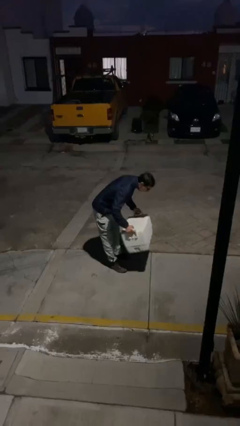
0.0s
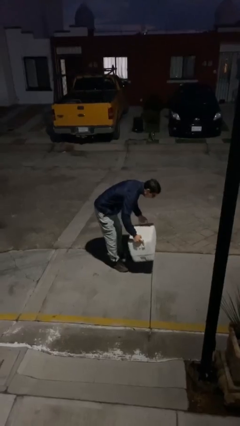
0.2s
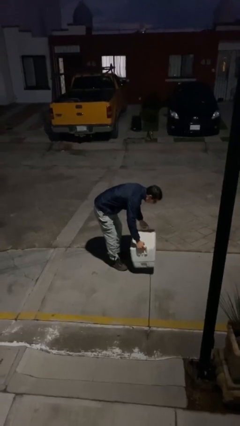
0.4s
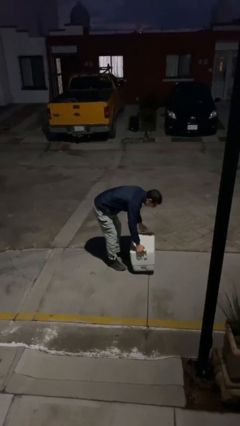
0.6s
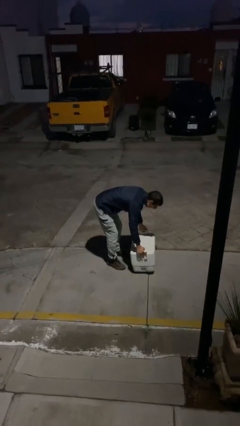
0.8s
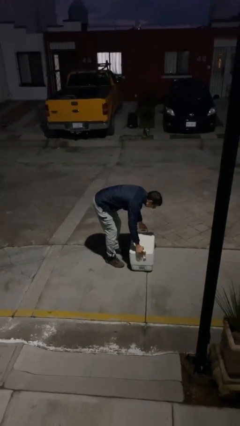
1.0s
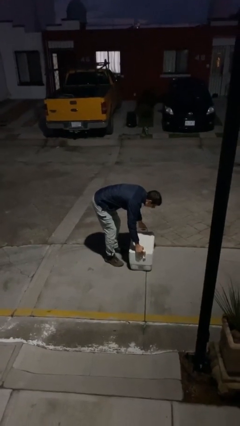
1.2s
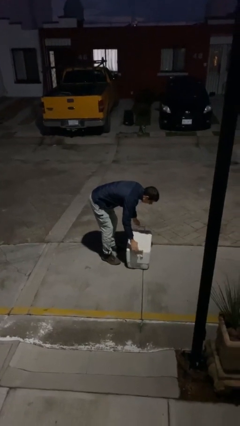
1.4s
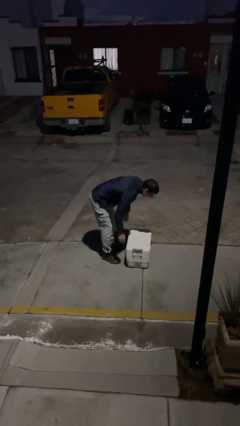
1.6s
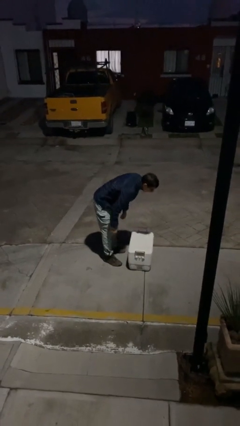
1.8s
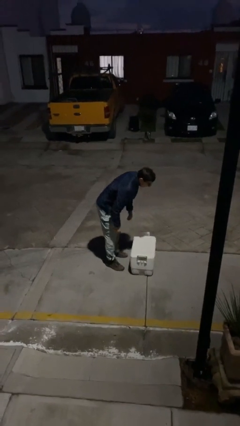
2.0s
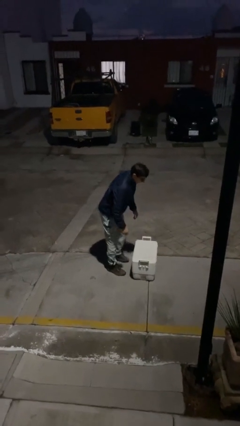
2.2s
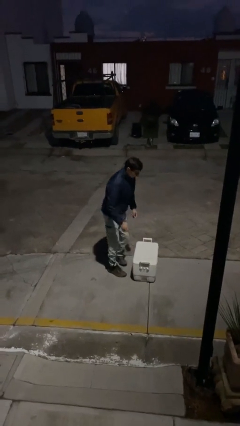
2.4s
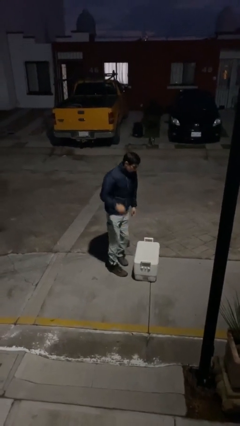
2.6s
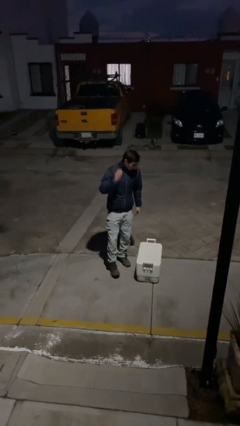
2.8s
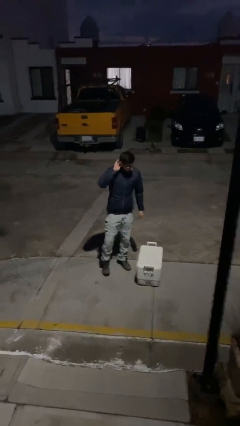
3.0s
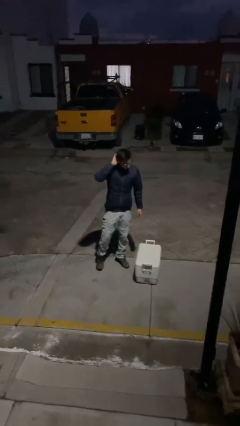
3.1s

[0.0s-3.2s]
person puts down object on floor

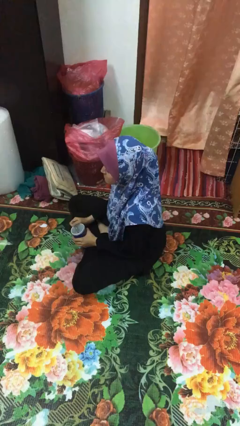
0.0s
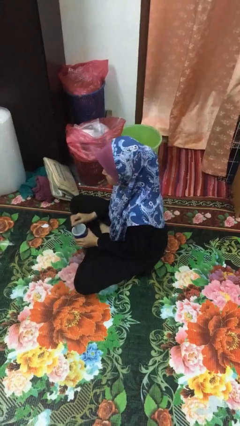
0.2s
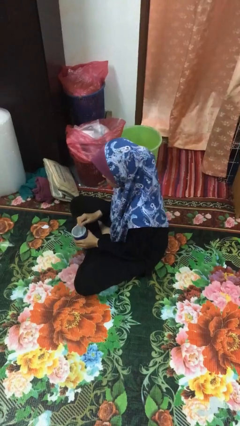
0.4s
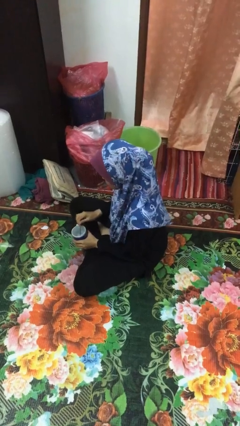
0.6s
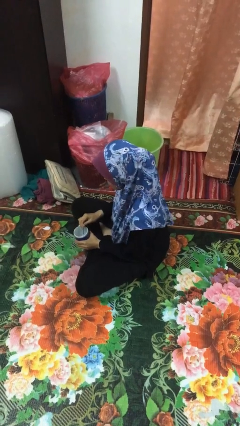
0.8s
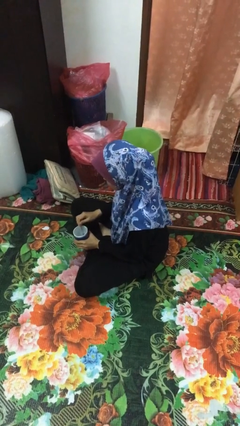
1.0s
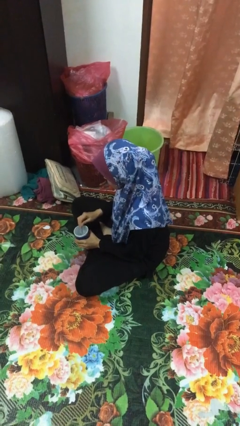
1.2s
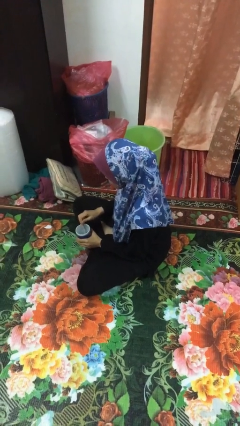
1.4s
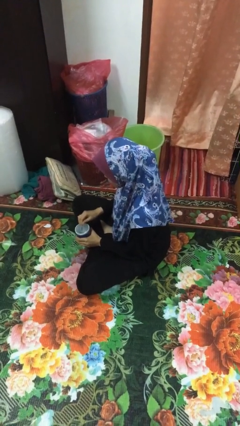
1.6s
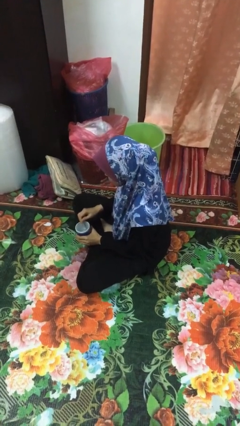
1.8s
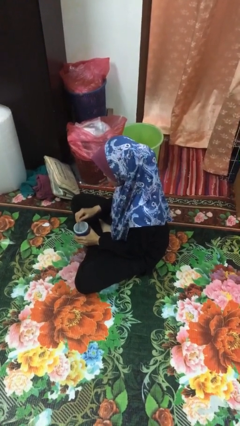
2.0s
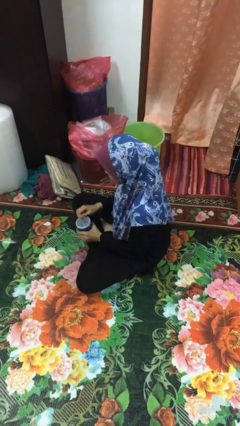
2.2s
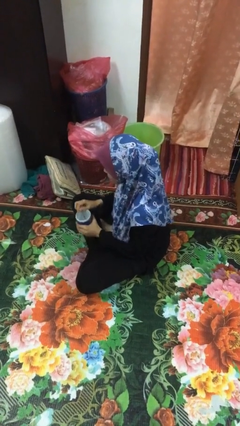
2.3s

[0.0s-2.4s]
person stirs mug

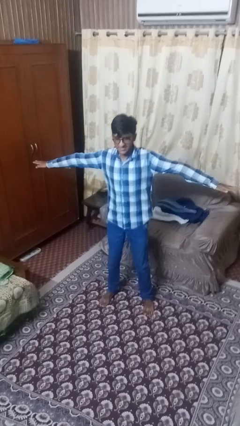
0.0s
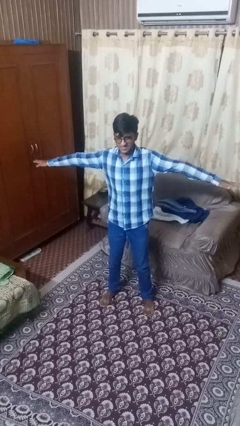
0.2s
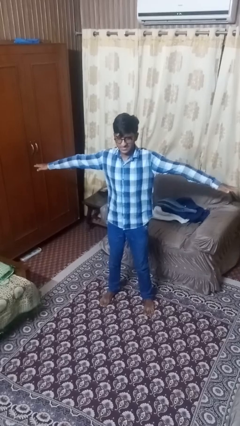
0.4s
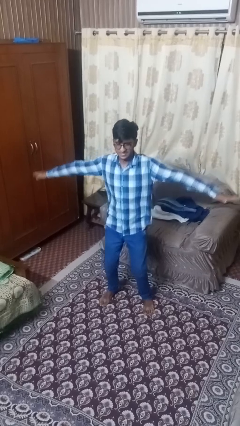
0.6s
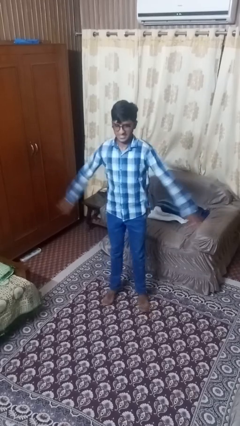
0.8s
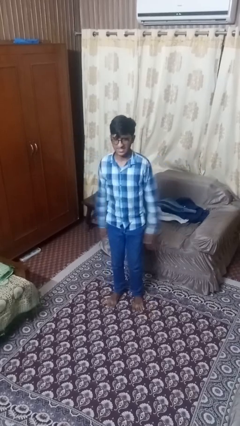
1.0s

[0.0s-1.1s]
person exercises with jumping jacks

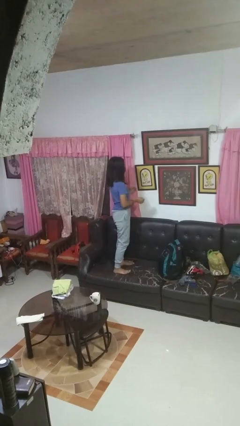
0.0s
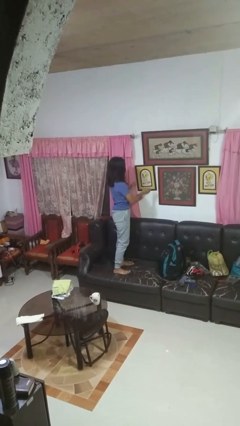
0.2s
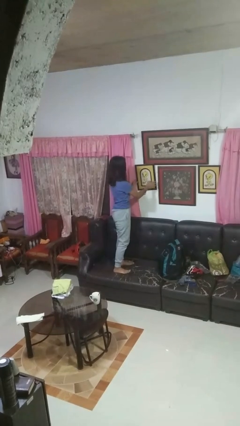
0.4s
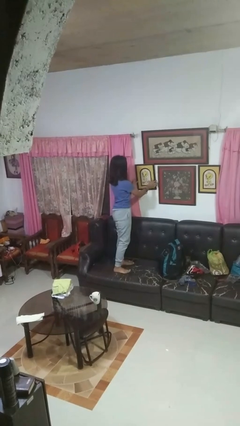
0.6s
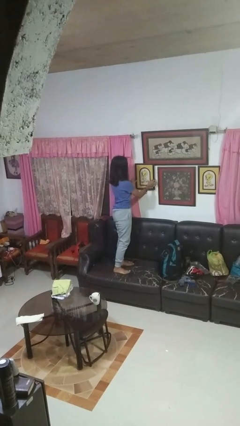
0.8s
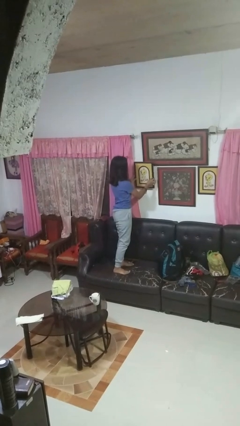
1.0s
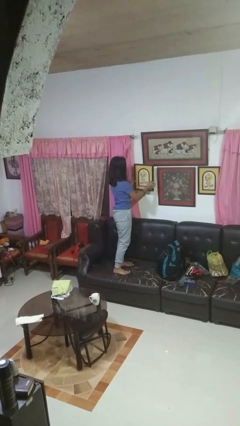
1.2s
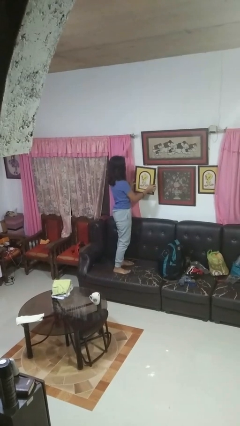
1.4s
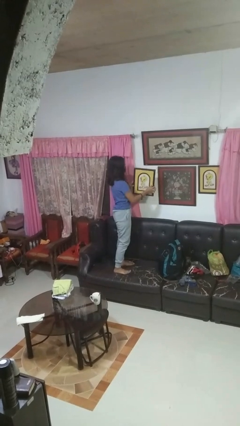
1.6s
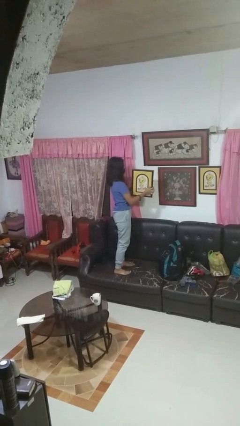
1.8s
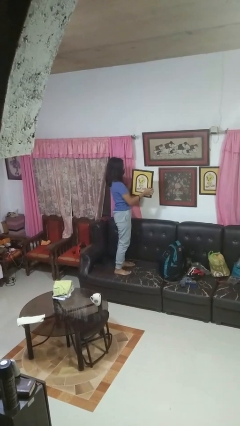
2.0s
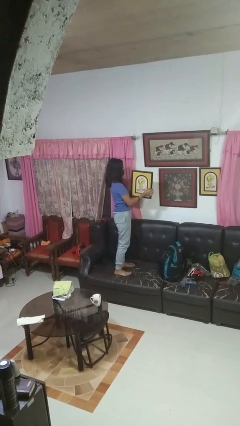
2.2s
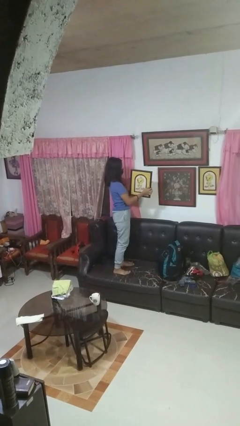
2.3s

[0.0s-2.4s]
person takes down picture frame

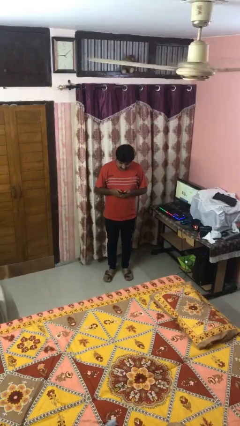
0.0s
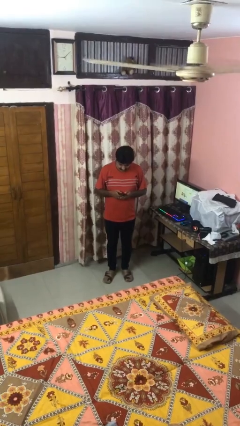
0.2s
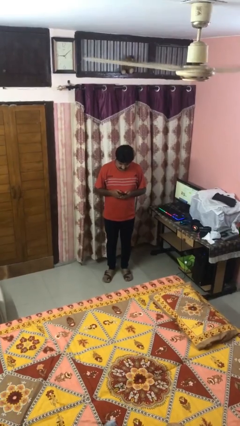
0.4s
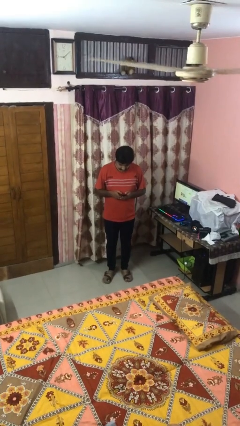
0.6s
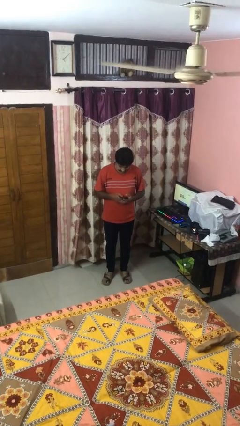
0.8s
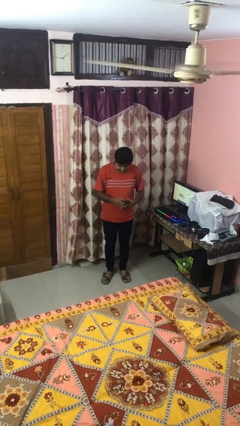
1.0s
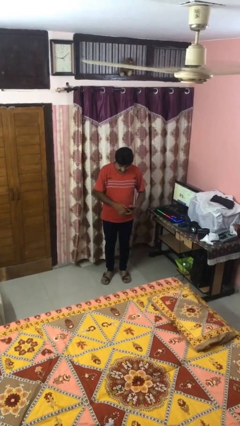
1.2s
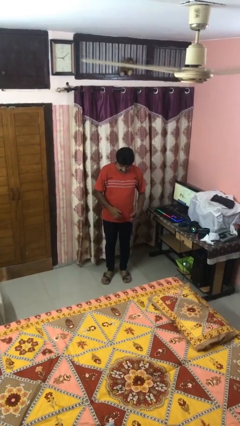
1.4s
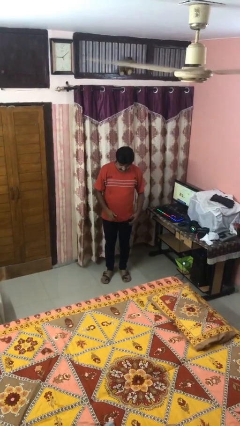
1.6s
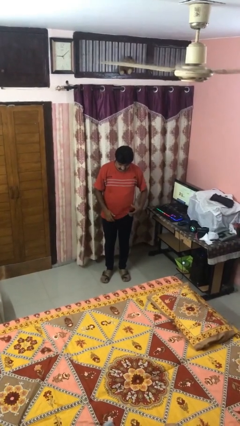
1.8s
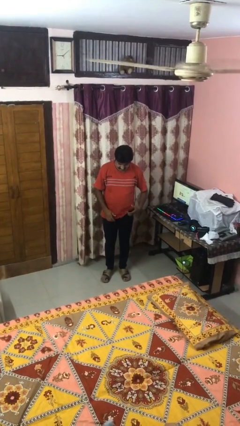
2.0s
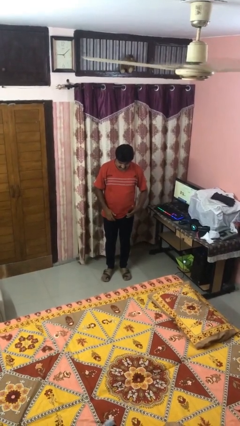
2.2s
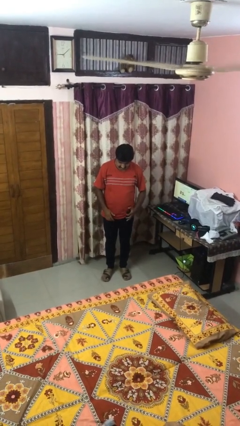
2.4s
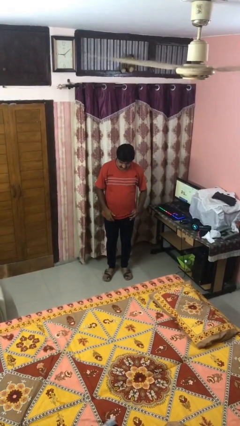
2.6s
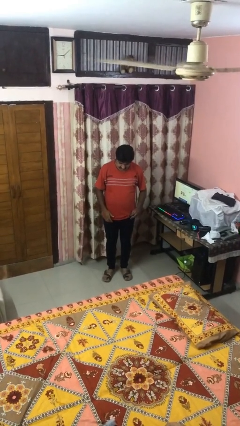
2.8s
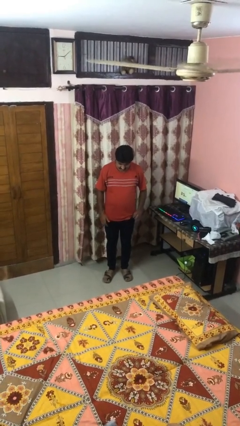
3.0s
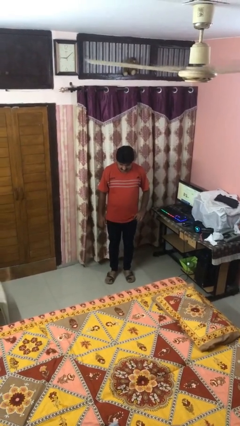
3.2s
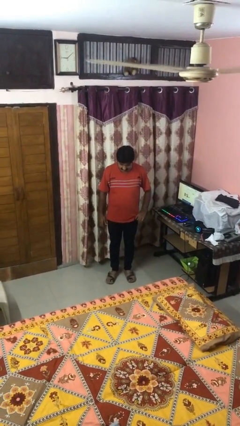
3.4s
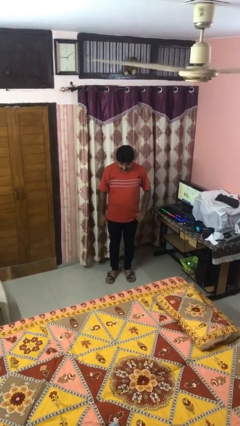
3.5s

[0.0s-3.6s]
person puts phone into pocket

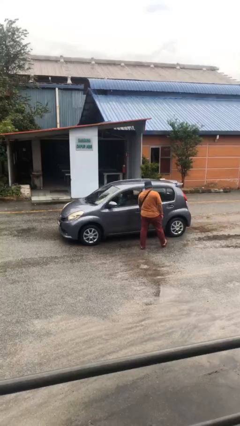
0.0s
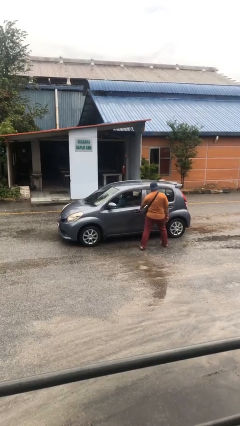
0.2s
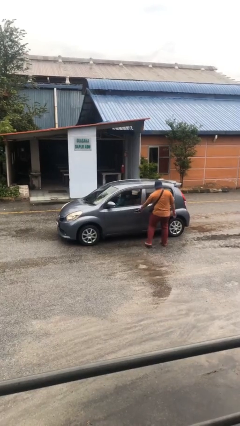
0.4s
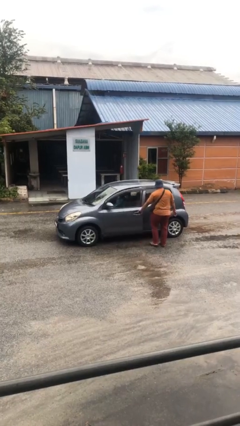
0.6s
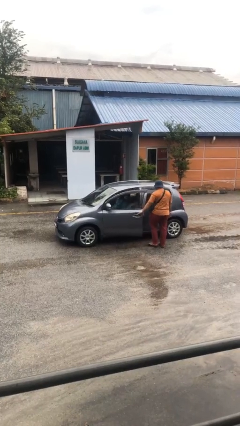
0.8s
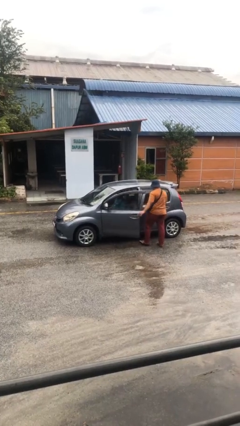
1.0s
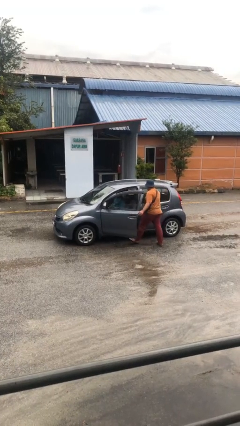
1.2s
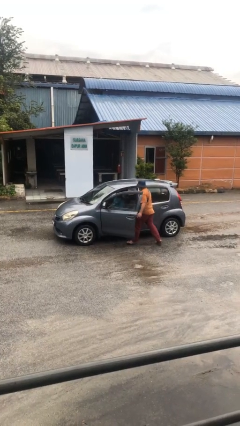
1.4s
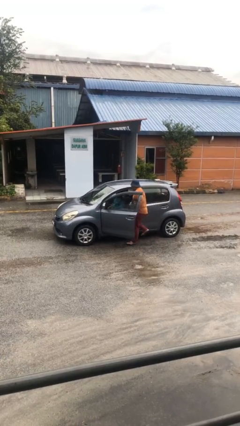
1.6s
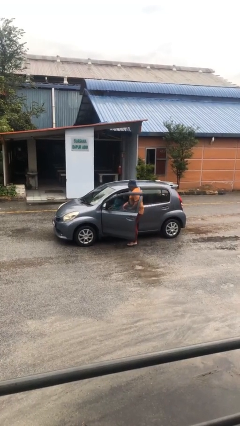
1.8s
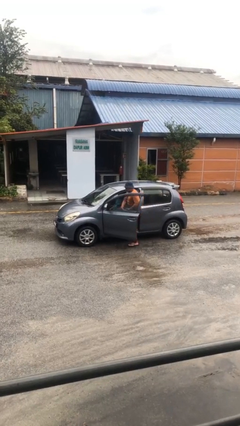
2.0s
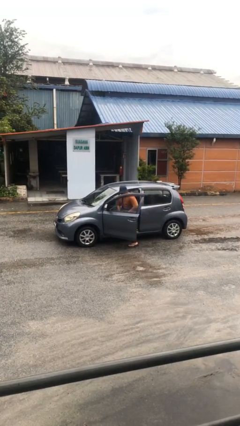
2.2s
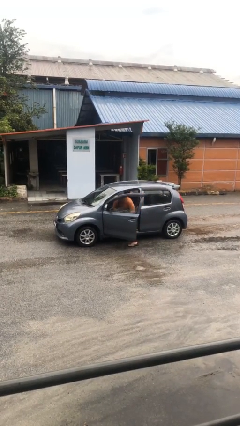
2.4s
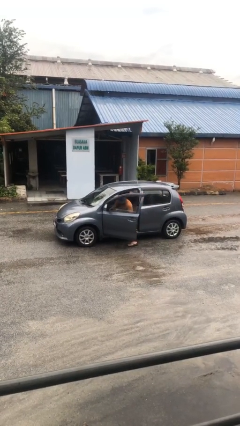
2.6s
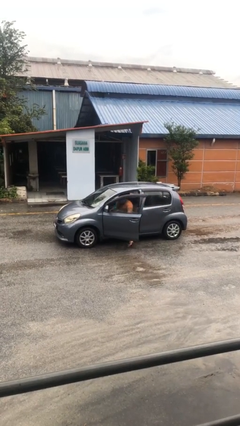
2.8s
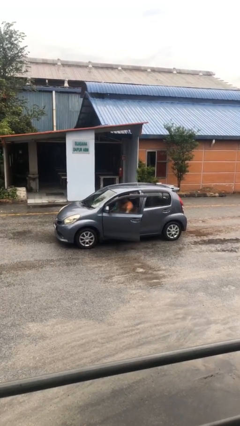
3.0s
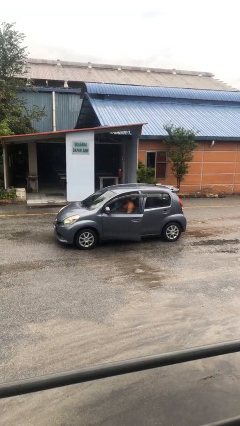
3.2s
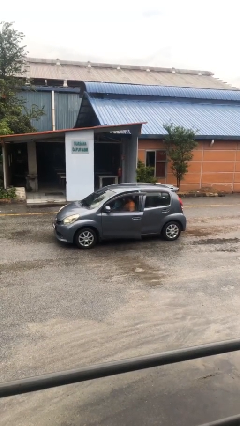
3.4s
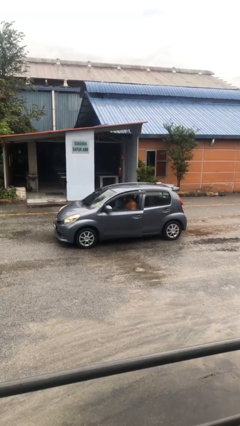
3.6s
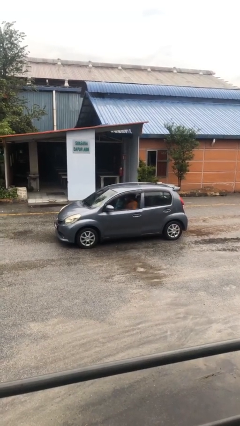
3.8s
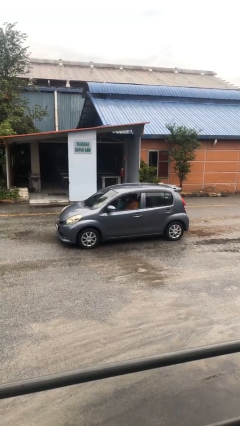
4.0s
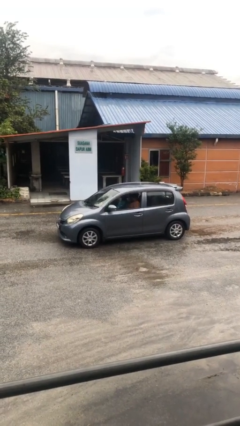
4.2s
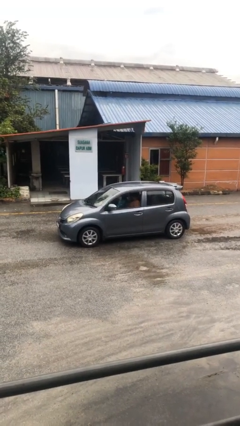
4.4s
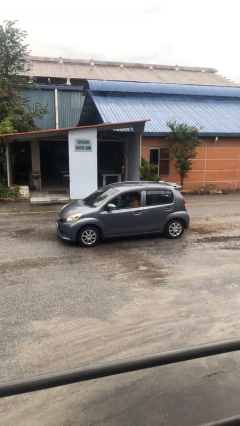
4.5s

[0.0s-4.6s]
car picks up person

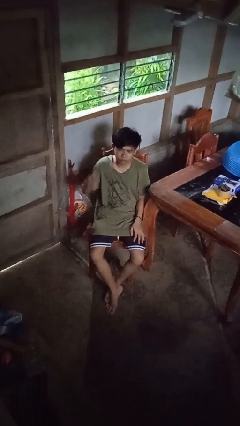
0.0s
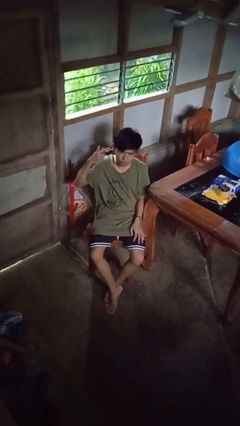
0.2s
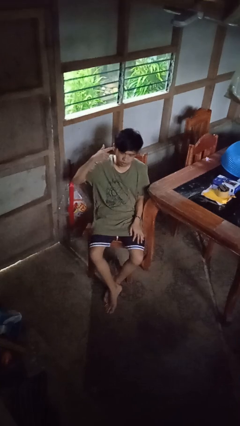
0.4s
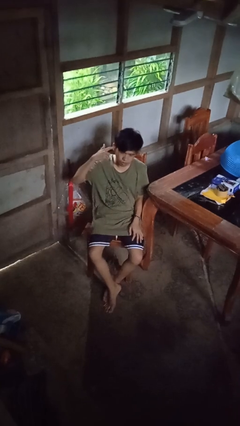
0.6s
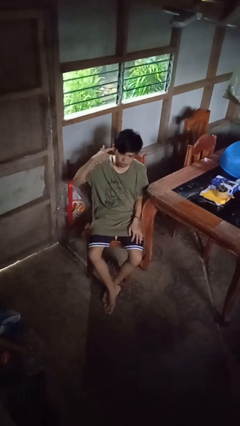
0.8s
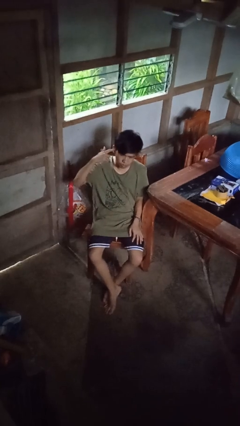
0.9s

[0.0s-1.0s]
person gestures listen closely
